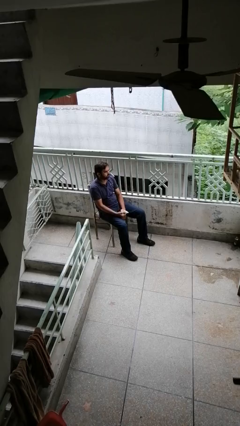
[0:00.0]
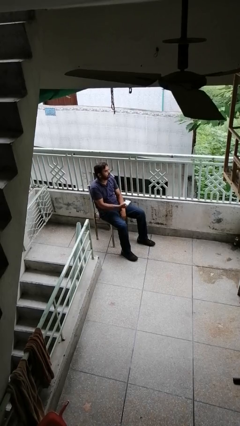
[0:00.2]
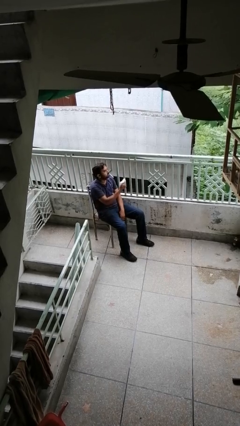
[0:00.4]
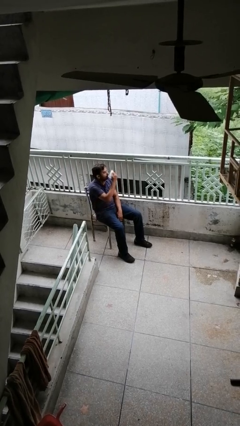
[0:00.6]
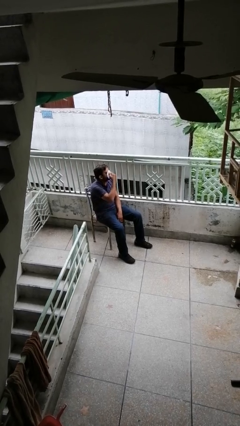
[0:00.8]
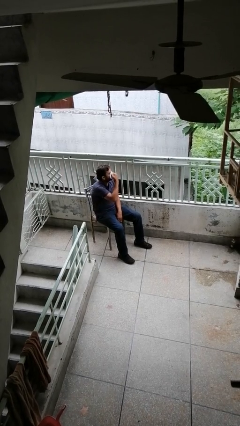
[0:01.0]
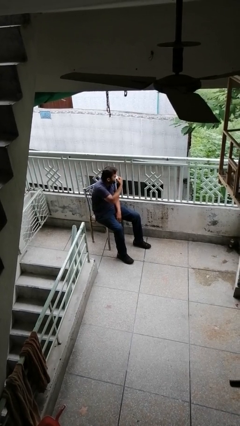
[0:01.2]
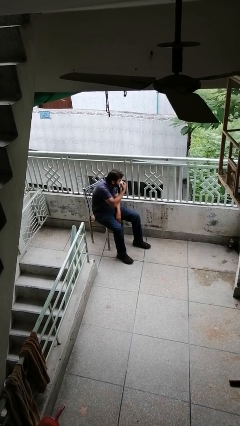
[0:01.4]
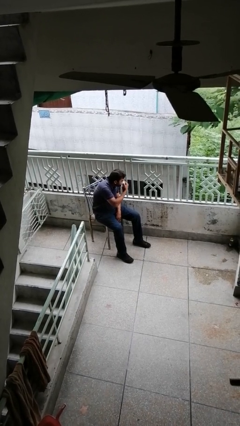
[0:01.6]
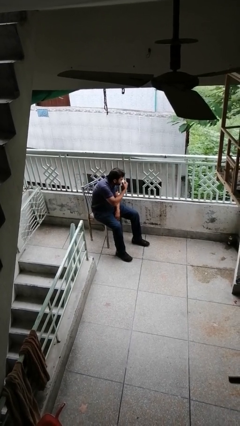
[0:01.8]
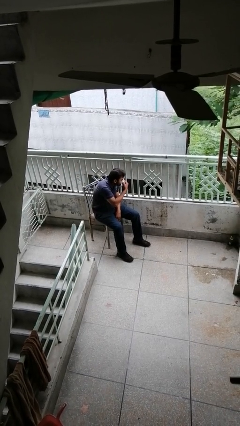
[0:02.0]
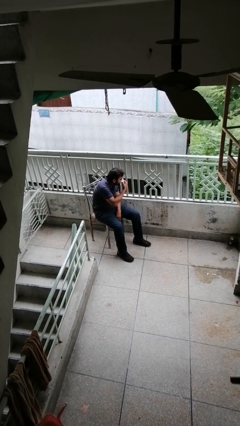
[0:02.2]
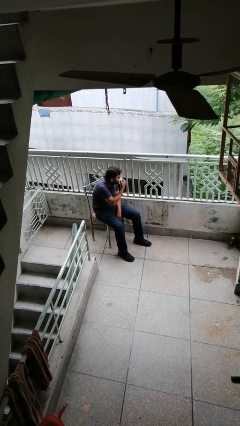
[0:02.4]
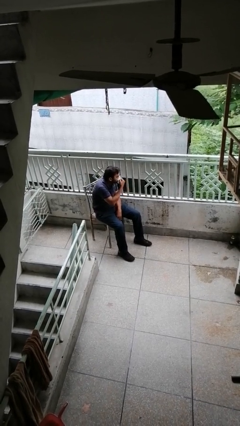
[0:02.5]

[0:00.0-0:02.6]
person blows nose

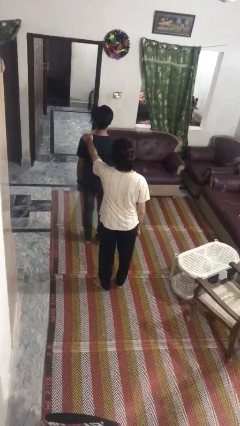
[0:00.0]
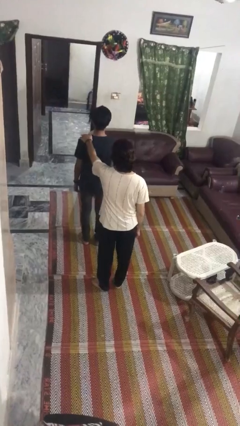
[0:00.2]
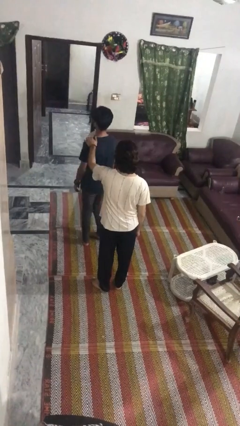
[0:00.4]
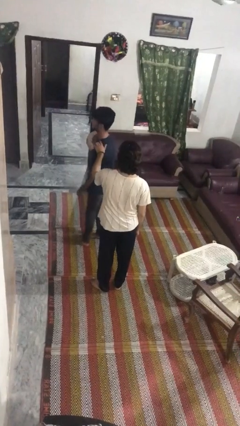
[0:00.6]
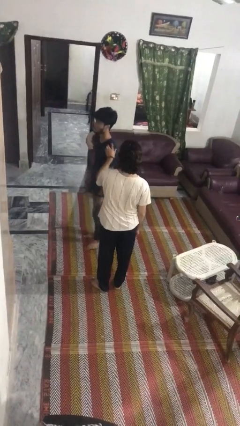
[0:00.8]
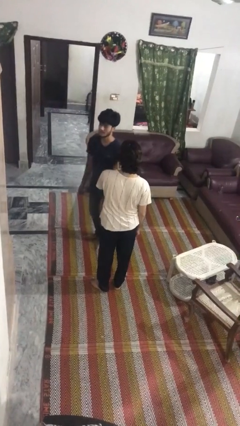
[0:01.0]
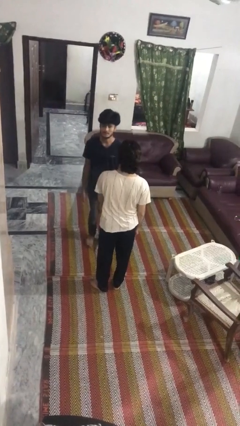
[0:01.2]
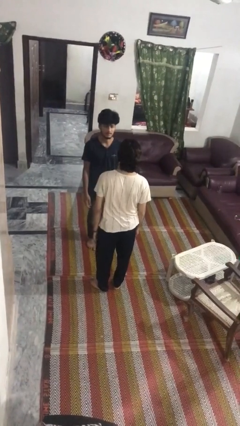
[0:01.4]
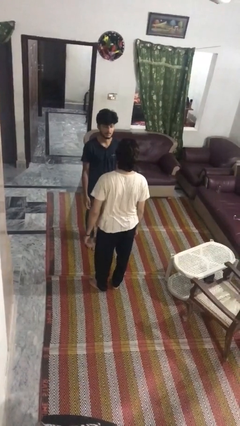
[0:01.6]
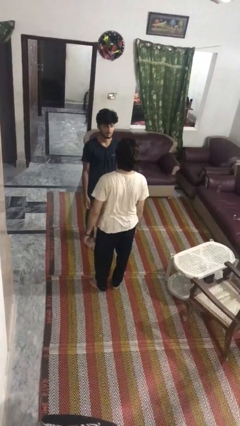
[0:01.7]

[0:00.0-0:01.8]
person spins person around

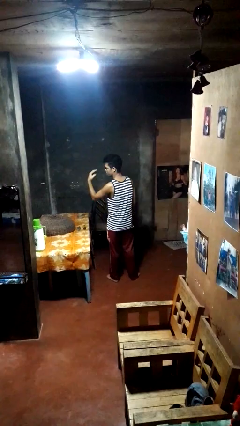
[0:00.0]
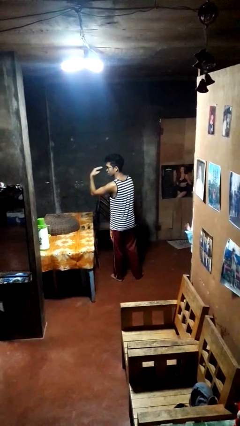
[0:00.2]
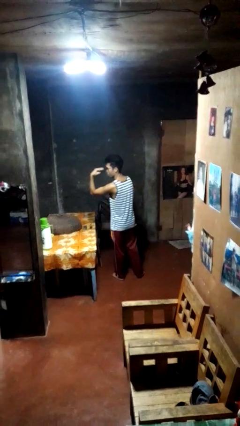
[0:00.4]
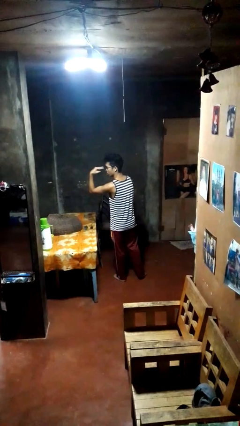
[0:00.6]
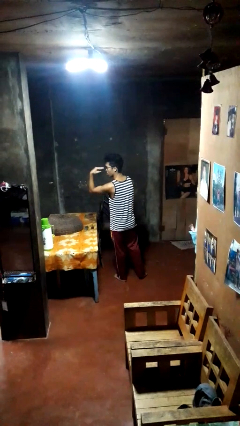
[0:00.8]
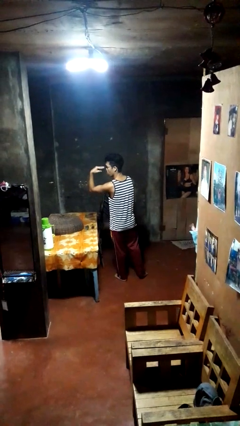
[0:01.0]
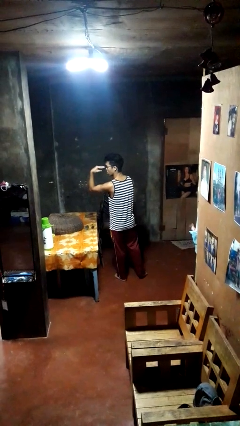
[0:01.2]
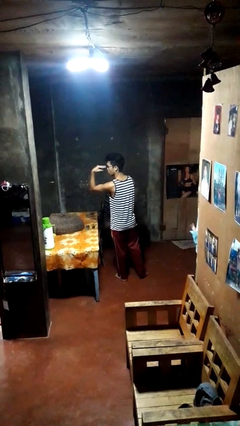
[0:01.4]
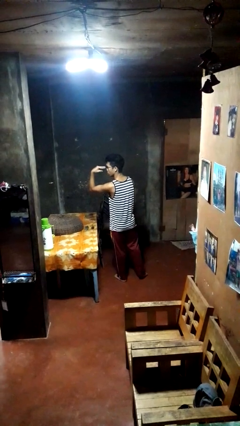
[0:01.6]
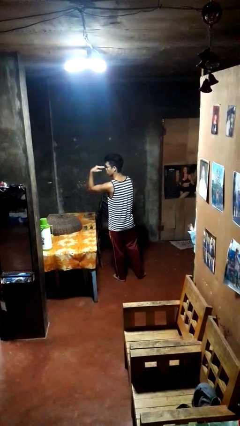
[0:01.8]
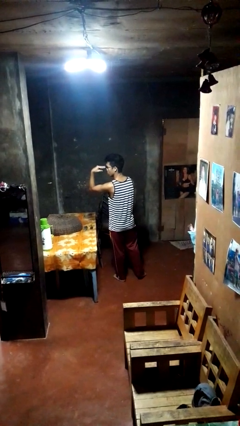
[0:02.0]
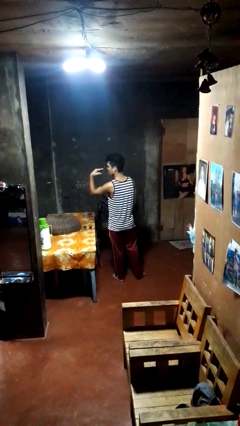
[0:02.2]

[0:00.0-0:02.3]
person gestures watch closely

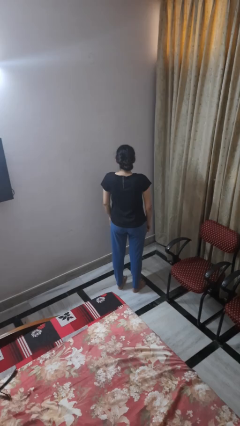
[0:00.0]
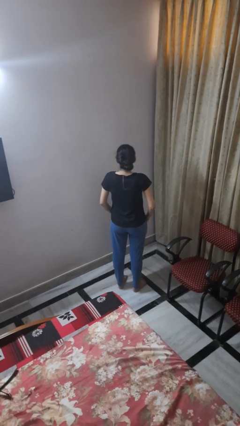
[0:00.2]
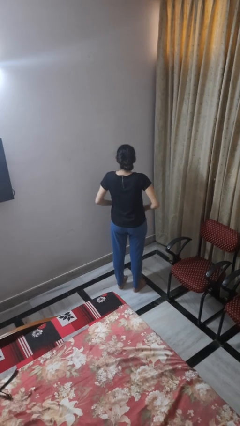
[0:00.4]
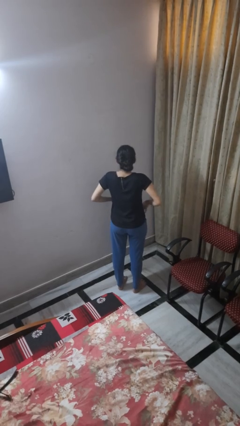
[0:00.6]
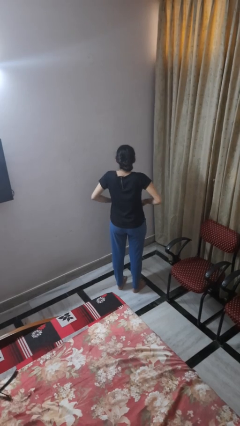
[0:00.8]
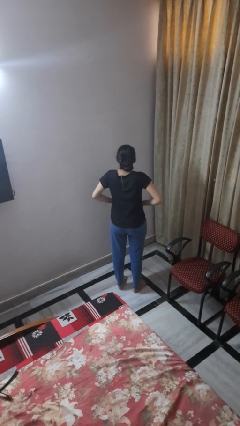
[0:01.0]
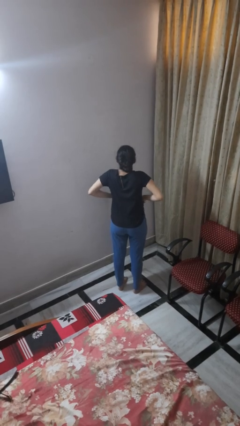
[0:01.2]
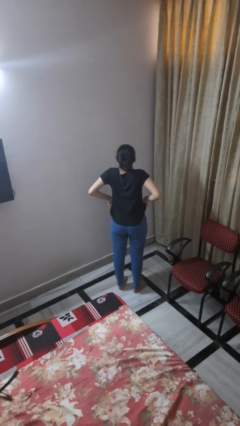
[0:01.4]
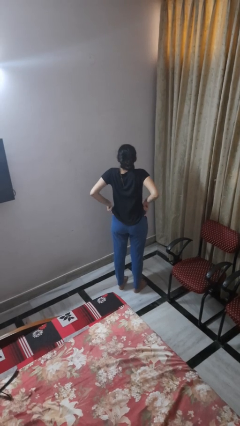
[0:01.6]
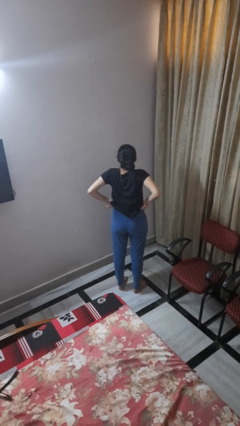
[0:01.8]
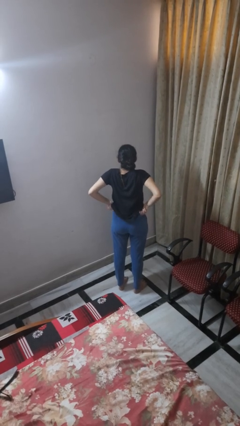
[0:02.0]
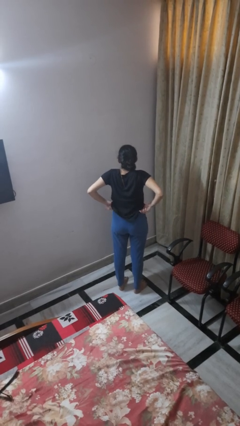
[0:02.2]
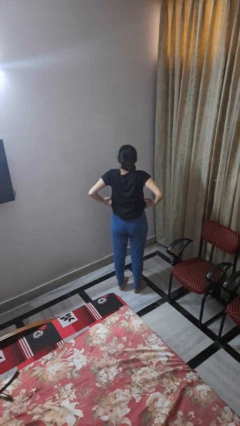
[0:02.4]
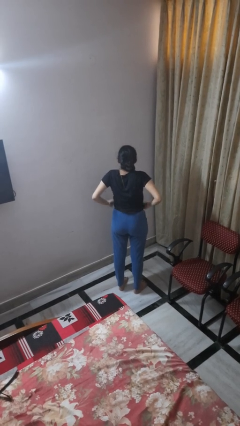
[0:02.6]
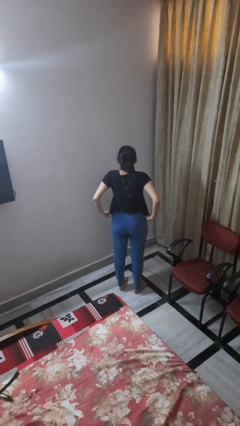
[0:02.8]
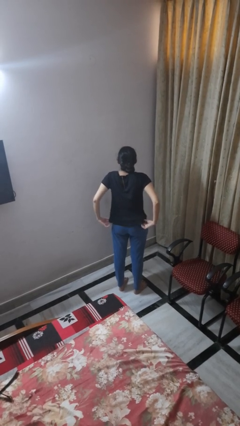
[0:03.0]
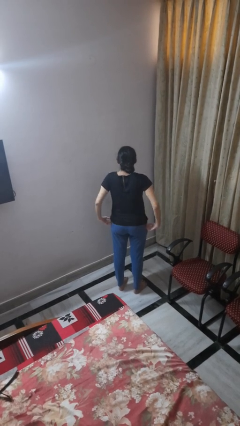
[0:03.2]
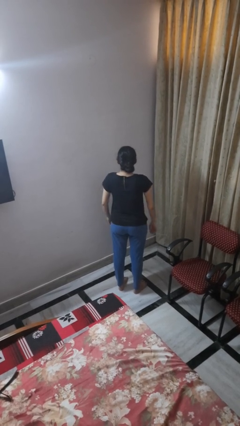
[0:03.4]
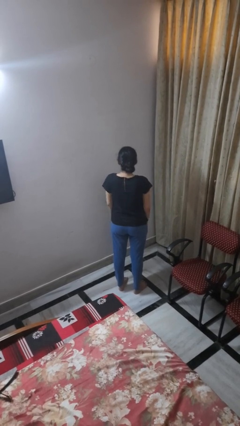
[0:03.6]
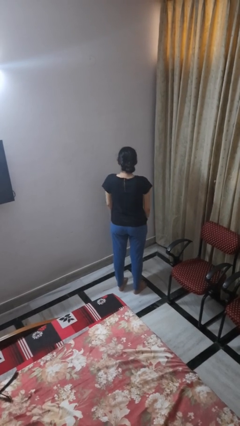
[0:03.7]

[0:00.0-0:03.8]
person hikes up pants

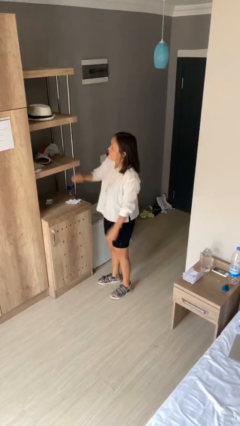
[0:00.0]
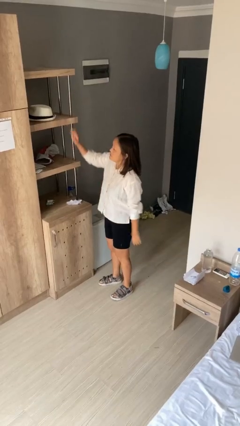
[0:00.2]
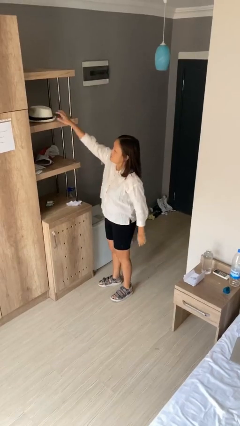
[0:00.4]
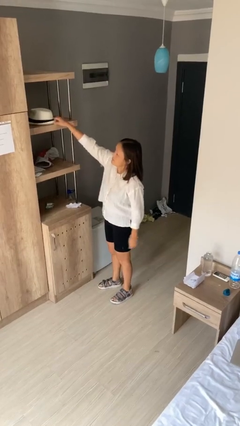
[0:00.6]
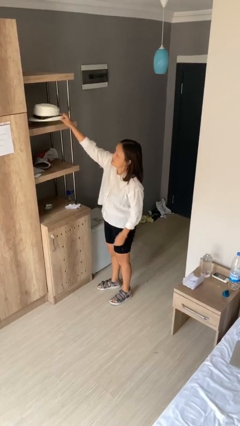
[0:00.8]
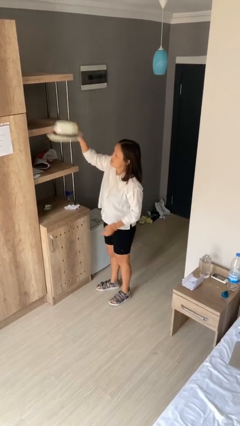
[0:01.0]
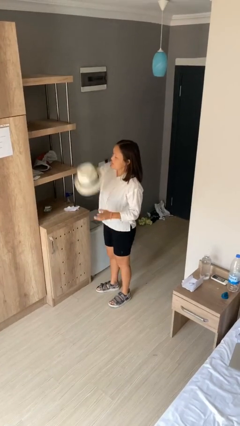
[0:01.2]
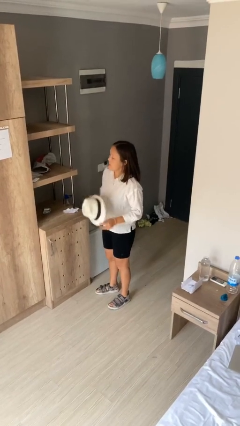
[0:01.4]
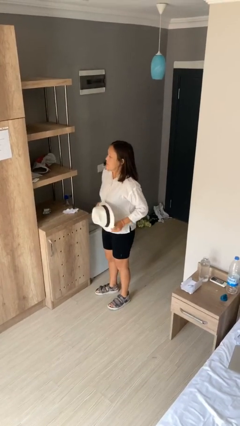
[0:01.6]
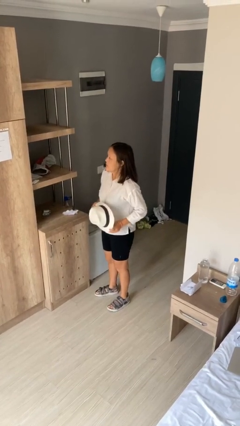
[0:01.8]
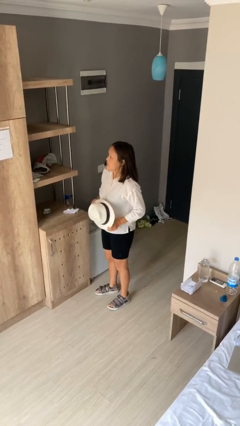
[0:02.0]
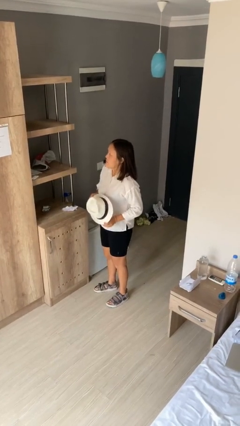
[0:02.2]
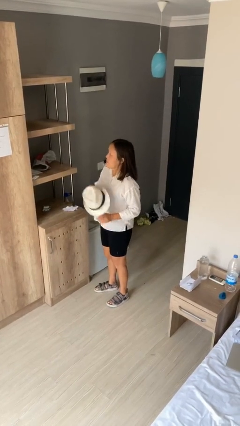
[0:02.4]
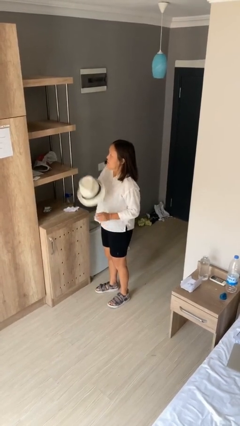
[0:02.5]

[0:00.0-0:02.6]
person picks up object from shelf

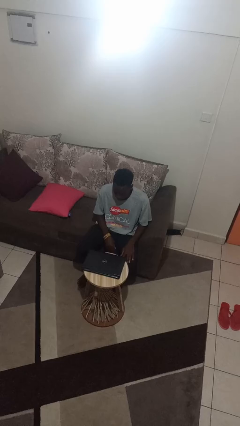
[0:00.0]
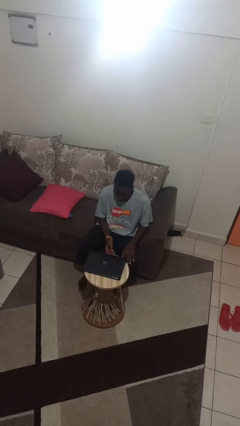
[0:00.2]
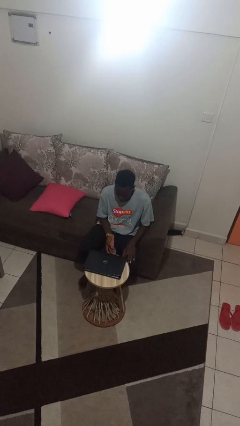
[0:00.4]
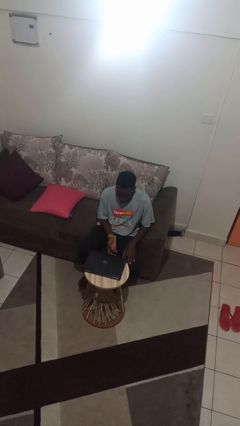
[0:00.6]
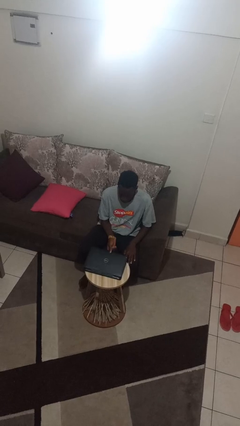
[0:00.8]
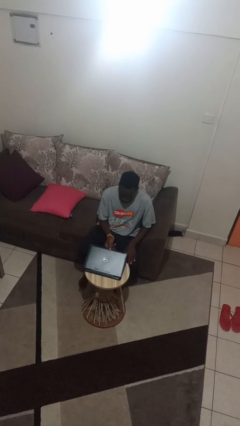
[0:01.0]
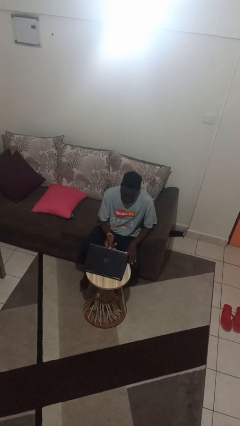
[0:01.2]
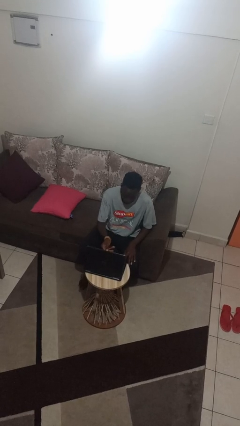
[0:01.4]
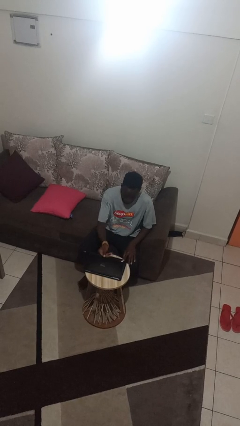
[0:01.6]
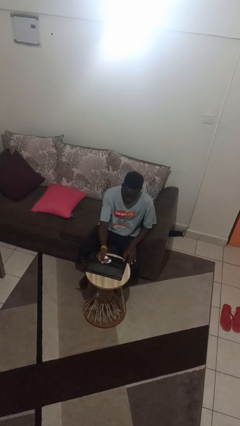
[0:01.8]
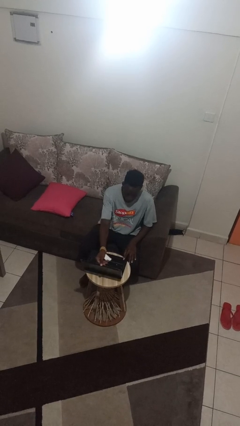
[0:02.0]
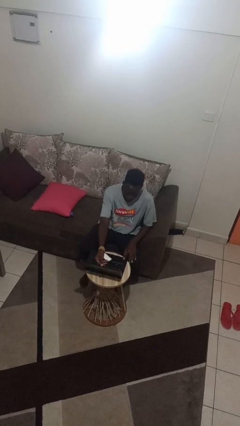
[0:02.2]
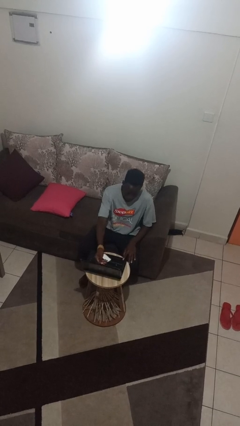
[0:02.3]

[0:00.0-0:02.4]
person opens laptop

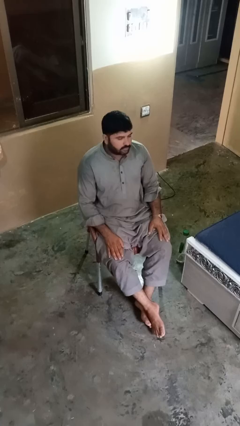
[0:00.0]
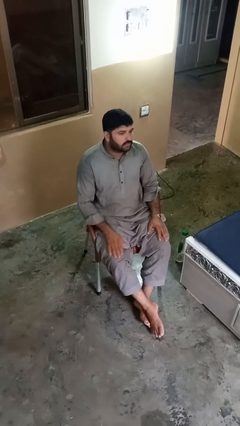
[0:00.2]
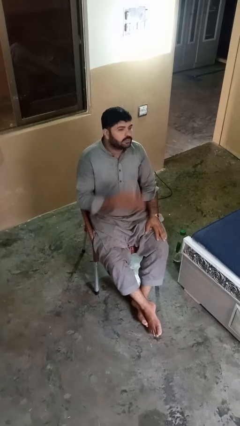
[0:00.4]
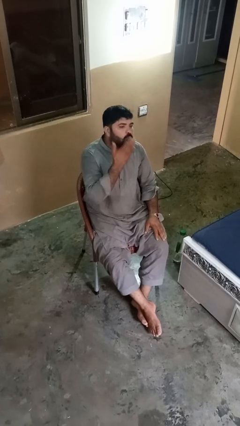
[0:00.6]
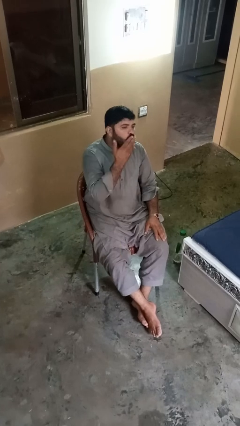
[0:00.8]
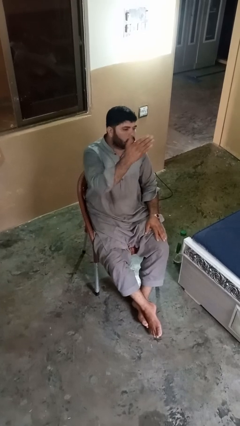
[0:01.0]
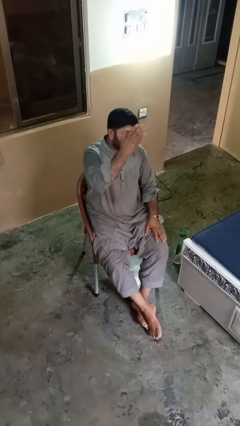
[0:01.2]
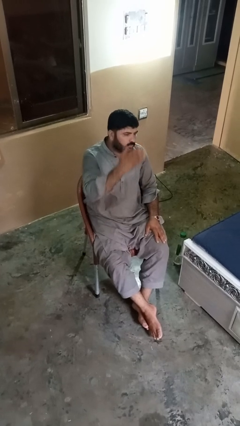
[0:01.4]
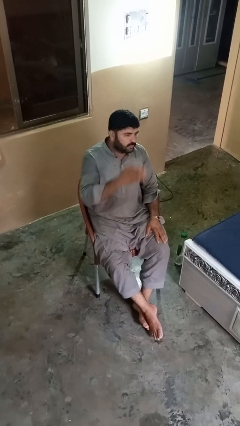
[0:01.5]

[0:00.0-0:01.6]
person gestures blow kiss
